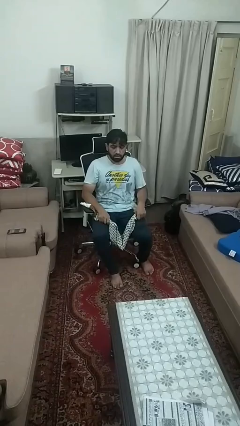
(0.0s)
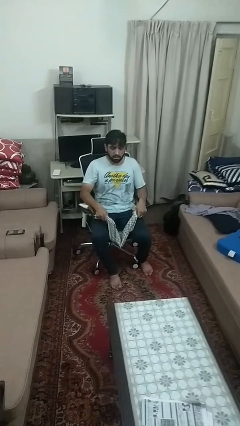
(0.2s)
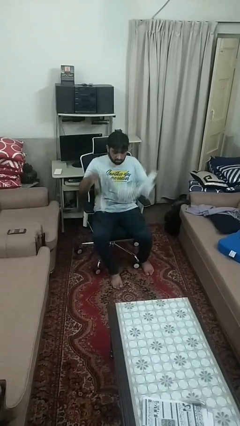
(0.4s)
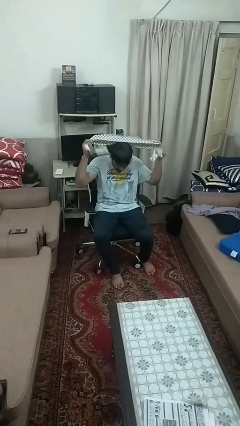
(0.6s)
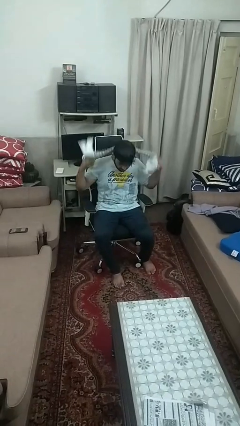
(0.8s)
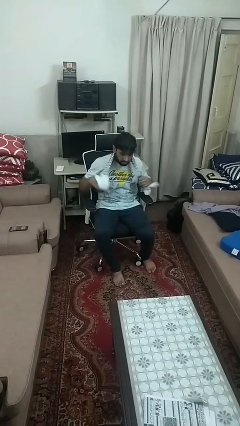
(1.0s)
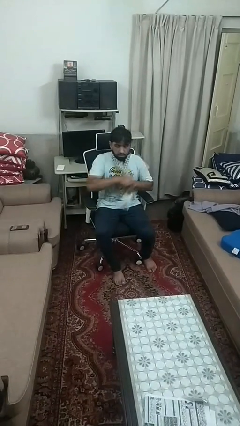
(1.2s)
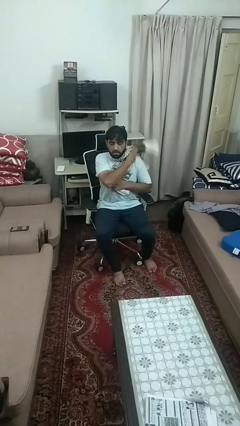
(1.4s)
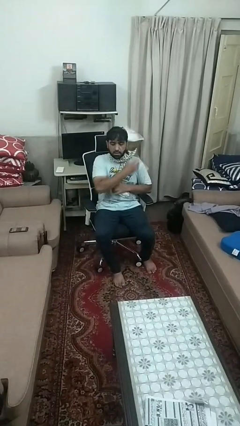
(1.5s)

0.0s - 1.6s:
person puts on scarf

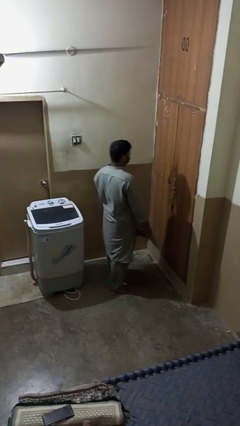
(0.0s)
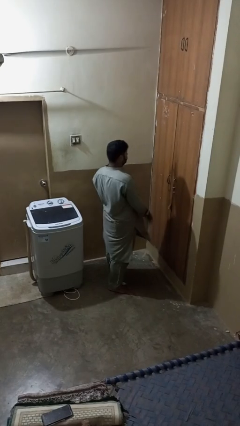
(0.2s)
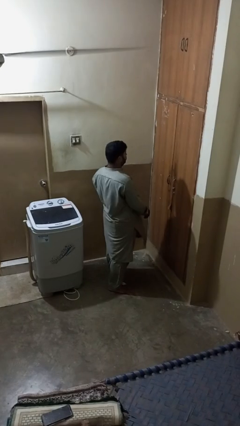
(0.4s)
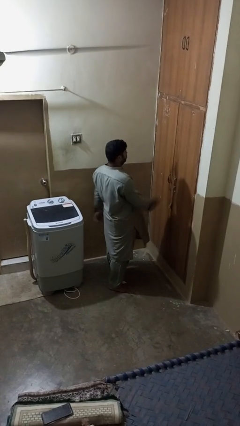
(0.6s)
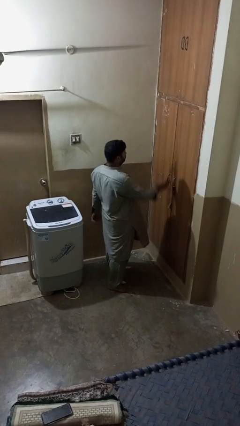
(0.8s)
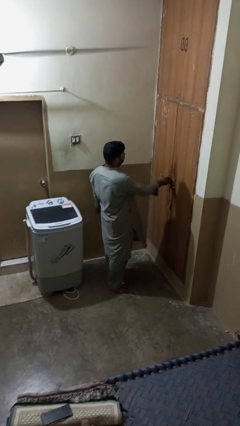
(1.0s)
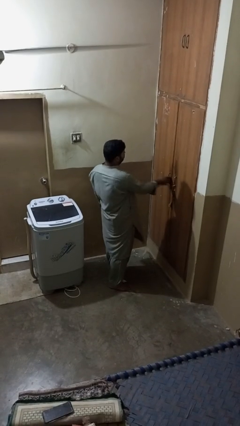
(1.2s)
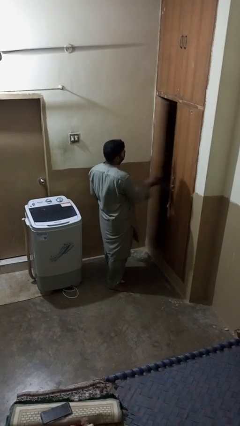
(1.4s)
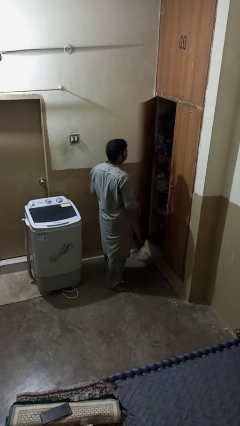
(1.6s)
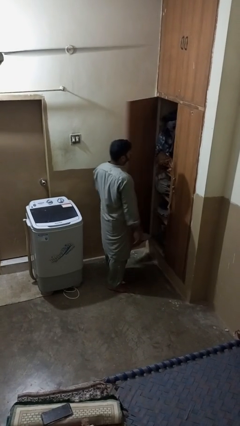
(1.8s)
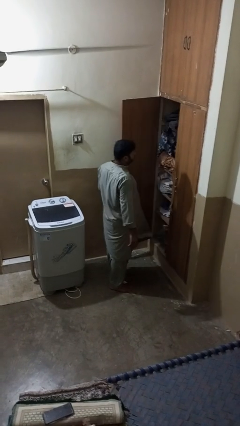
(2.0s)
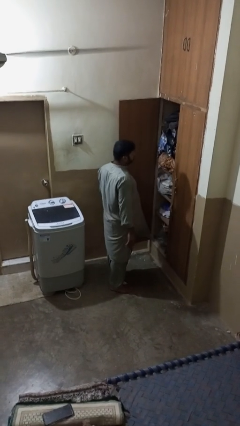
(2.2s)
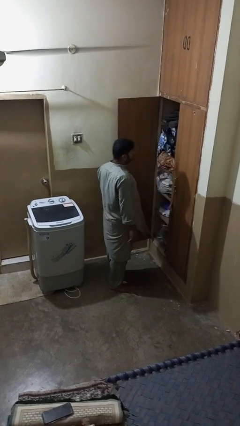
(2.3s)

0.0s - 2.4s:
person opens closet door

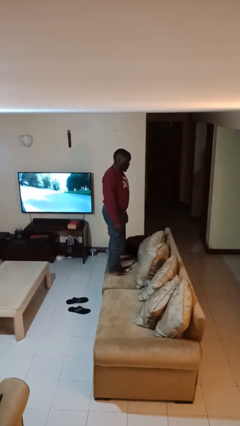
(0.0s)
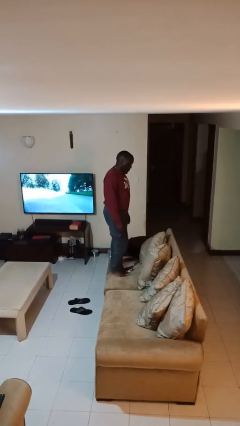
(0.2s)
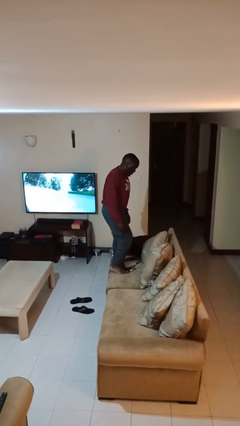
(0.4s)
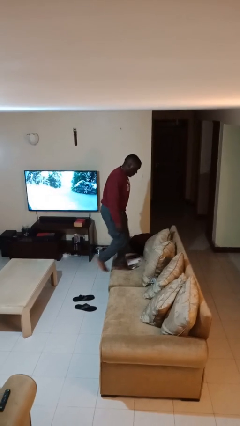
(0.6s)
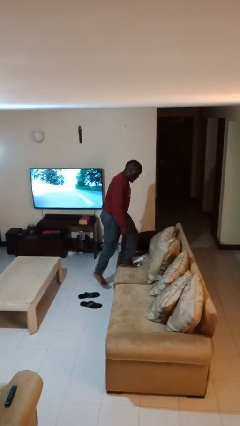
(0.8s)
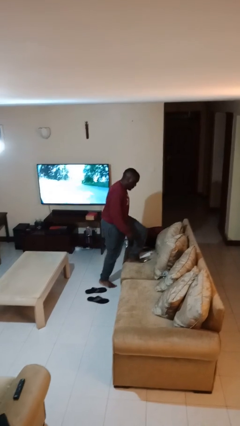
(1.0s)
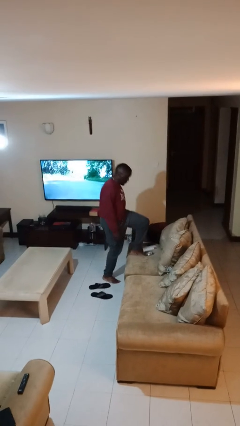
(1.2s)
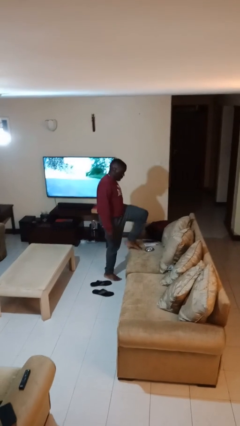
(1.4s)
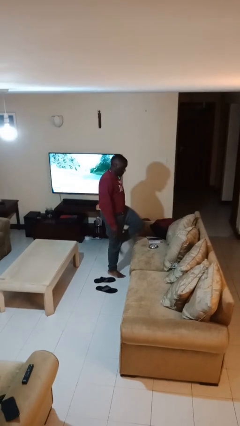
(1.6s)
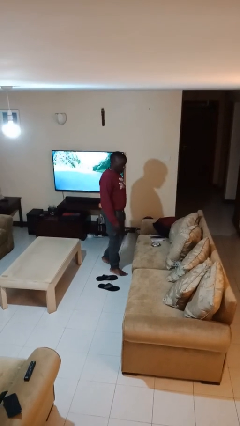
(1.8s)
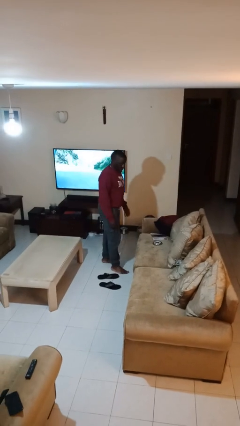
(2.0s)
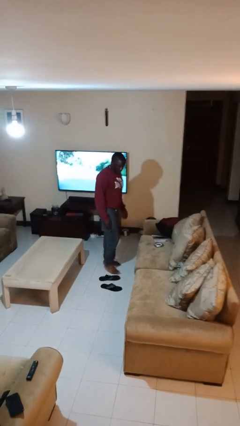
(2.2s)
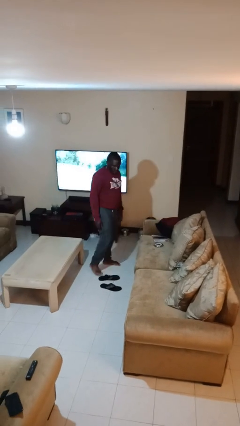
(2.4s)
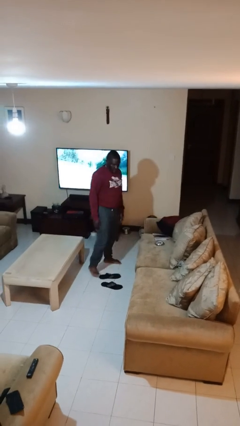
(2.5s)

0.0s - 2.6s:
person climbs off couch

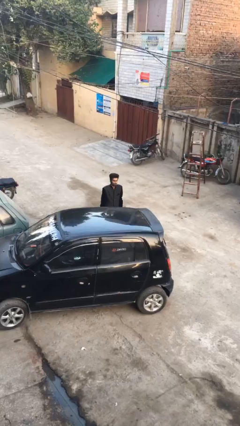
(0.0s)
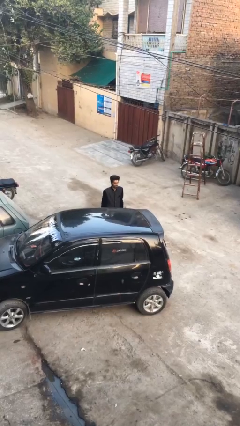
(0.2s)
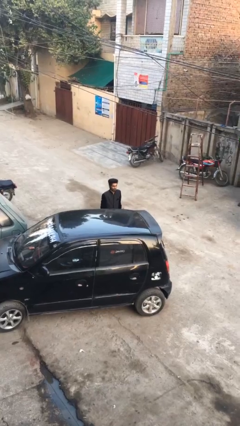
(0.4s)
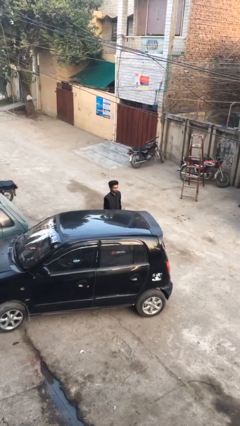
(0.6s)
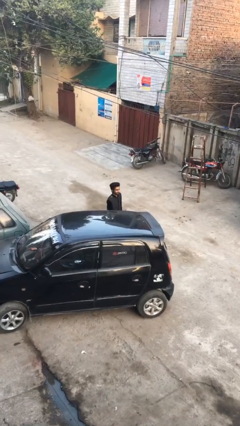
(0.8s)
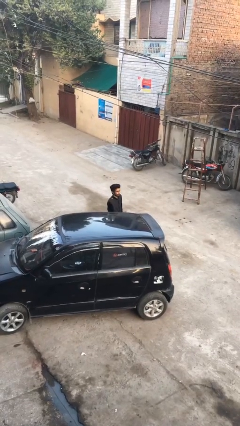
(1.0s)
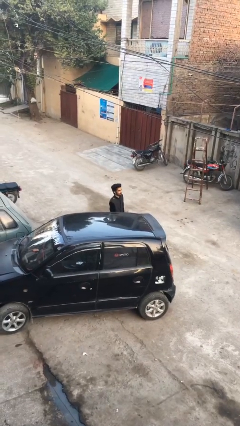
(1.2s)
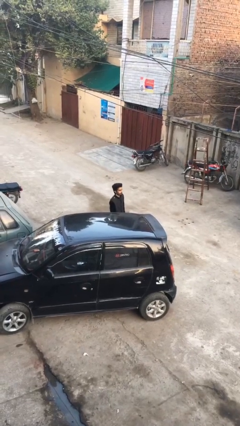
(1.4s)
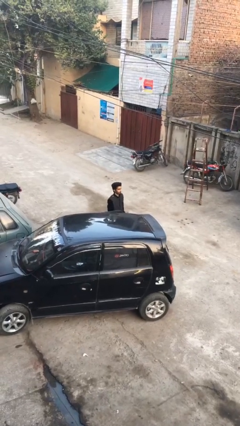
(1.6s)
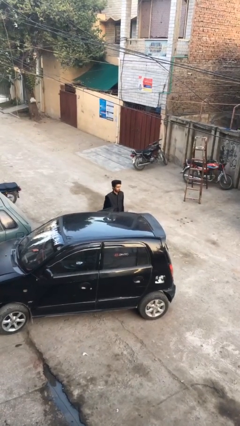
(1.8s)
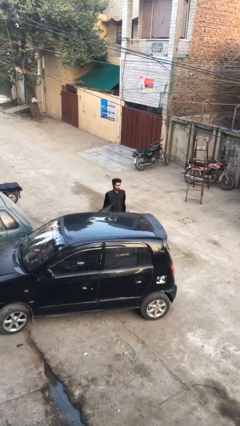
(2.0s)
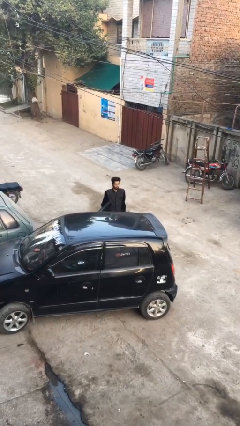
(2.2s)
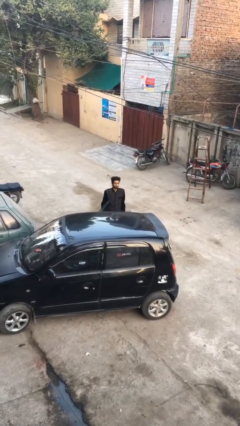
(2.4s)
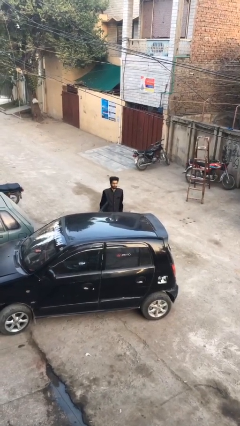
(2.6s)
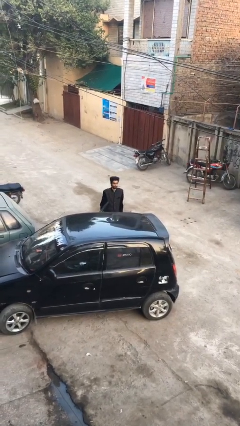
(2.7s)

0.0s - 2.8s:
person opens car door

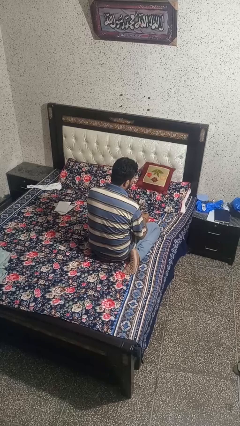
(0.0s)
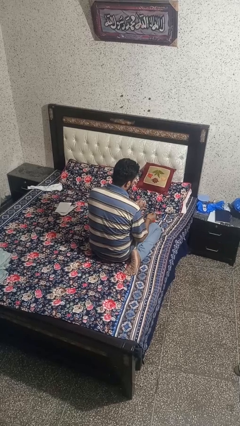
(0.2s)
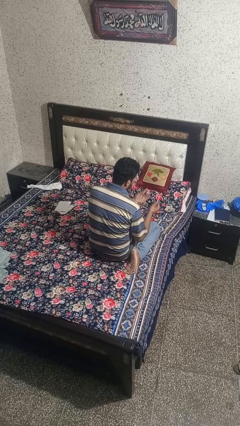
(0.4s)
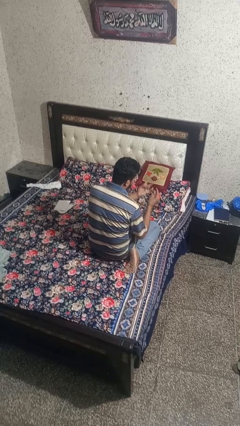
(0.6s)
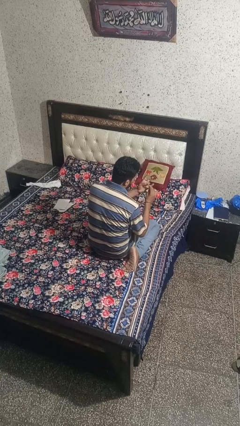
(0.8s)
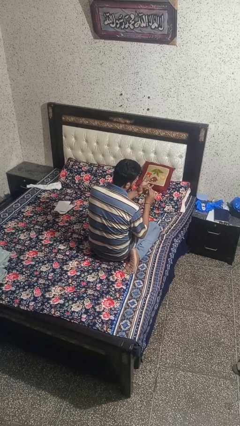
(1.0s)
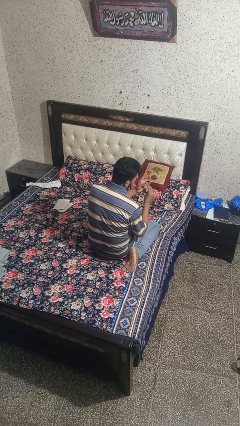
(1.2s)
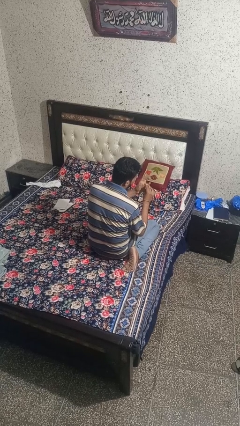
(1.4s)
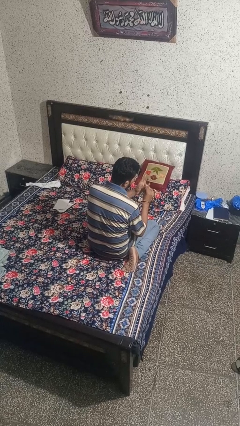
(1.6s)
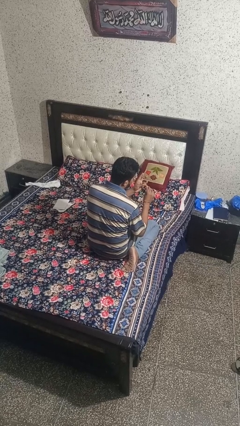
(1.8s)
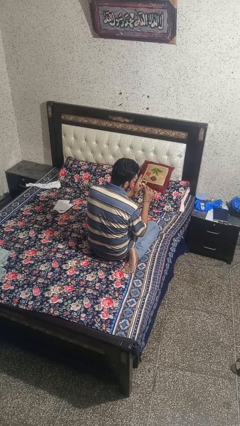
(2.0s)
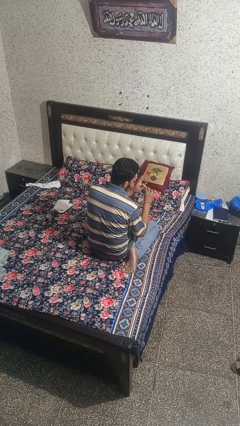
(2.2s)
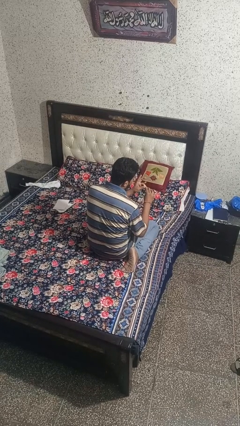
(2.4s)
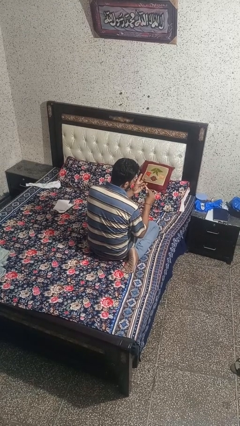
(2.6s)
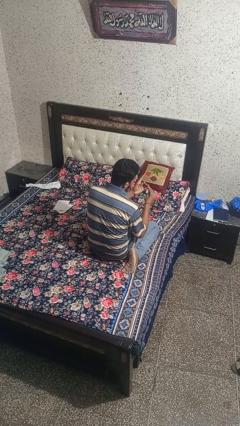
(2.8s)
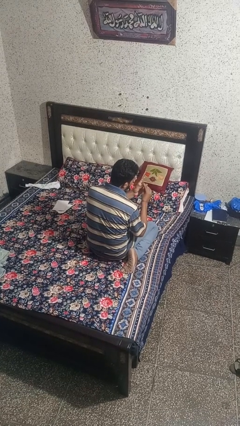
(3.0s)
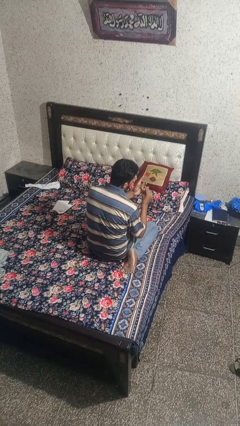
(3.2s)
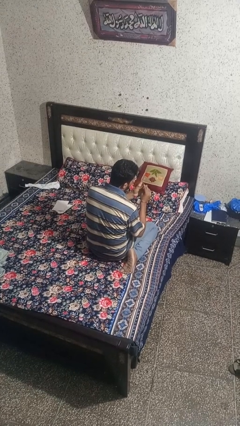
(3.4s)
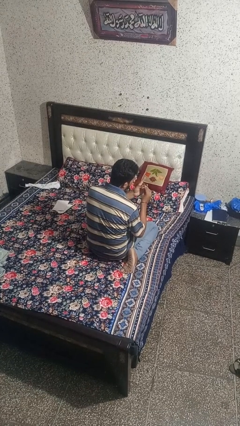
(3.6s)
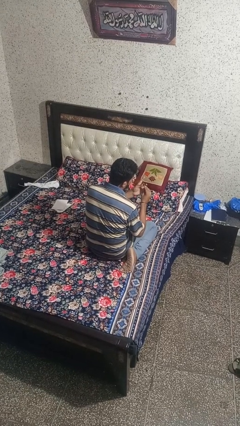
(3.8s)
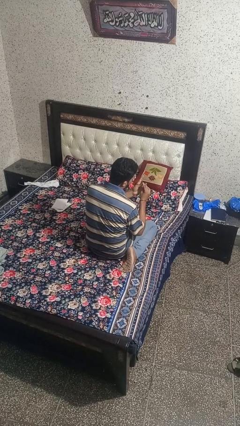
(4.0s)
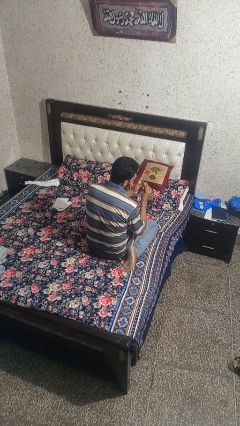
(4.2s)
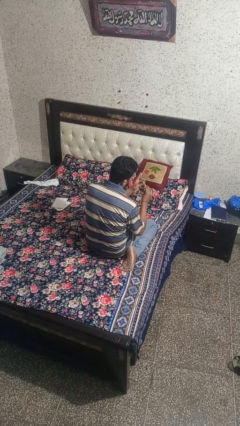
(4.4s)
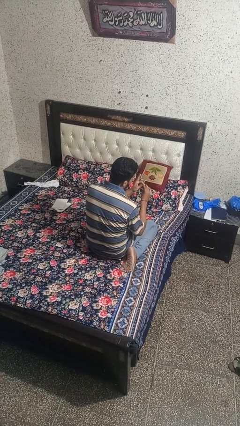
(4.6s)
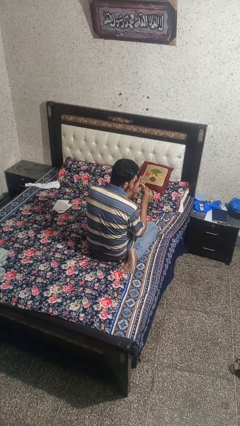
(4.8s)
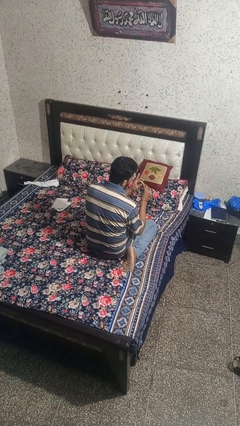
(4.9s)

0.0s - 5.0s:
person files fingernails

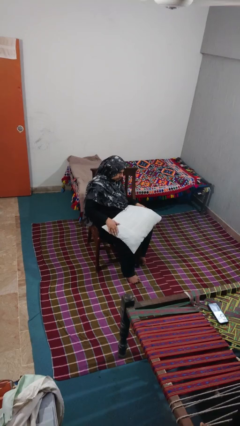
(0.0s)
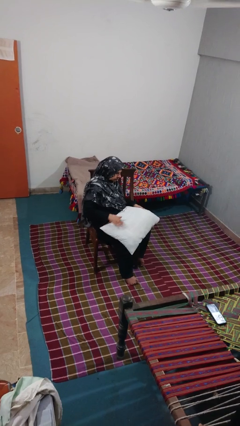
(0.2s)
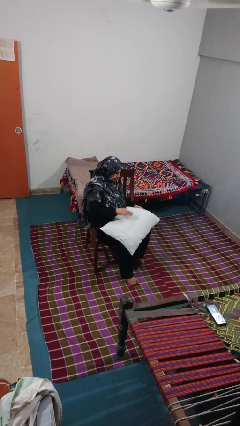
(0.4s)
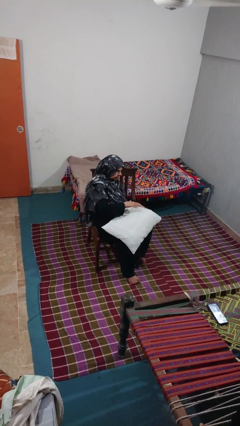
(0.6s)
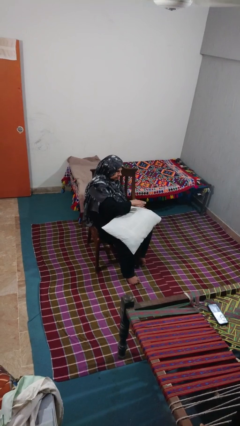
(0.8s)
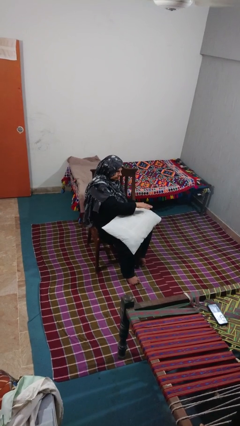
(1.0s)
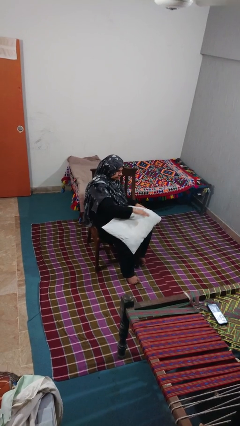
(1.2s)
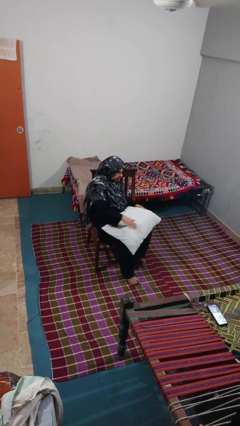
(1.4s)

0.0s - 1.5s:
person waves hand over object

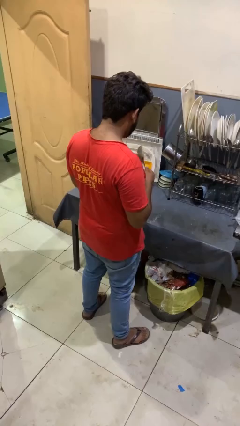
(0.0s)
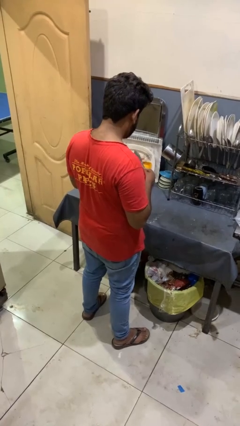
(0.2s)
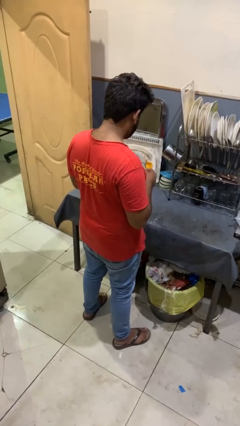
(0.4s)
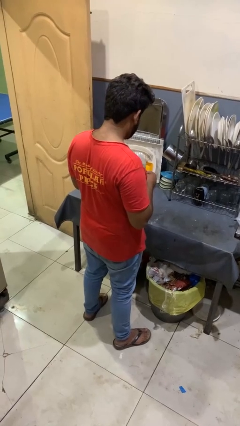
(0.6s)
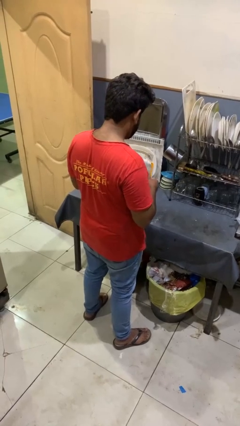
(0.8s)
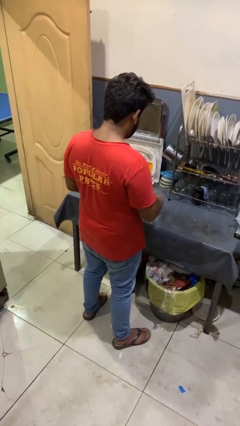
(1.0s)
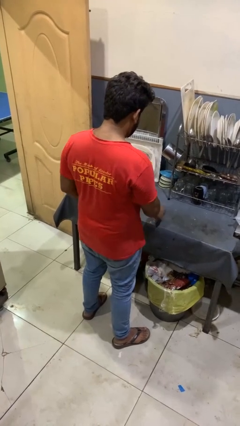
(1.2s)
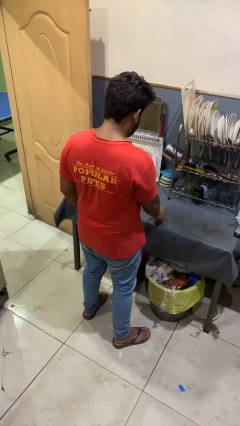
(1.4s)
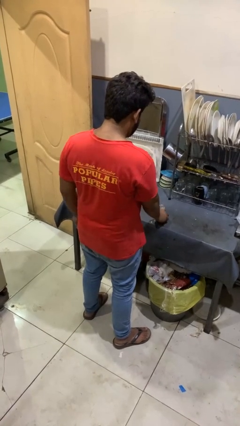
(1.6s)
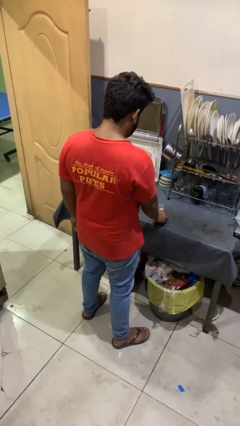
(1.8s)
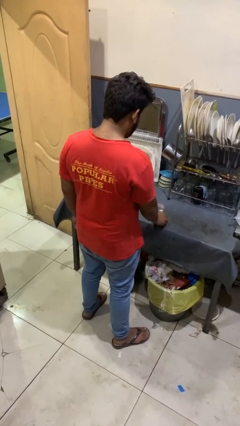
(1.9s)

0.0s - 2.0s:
person puts down object on countertop
